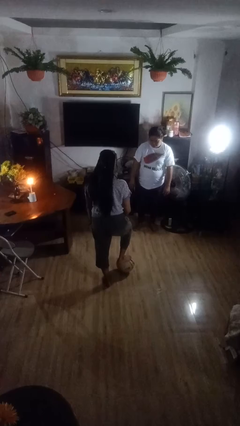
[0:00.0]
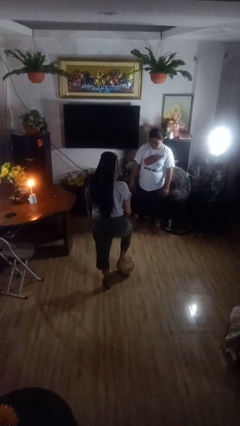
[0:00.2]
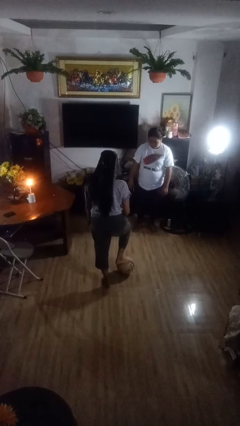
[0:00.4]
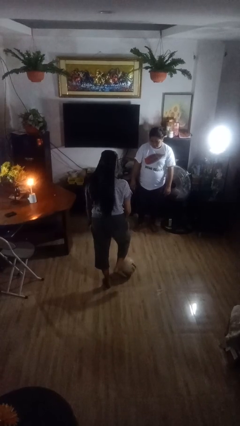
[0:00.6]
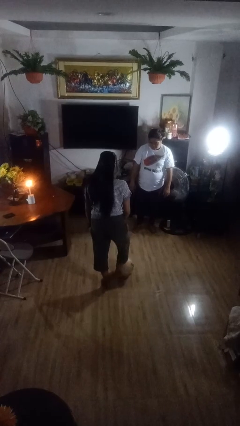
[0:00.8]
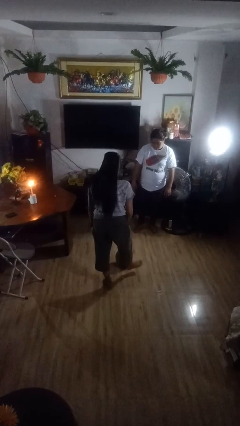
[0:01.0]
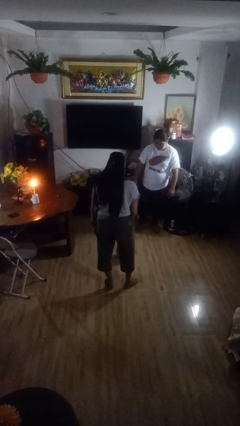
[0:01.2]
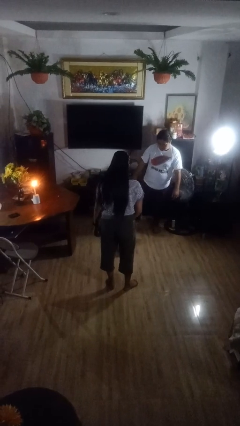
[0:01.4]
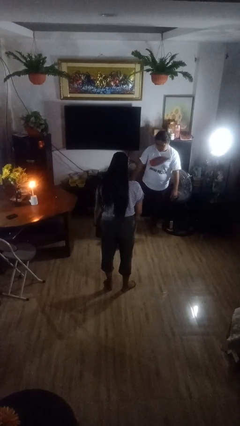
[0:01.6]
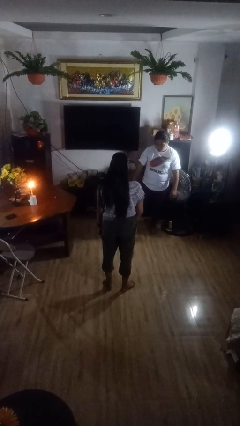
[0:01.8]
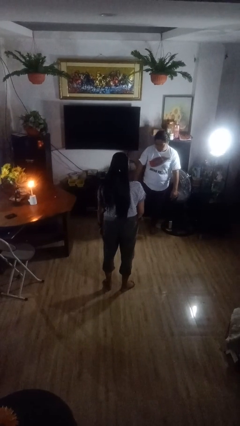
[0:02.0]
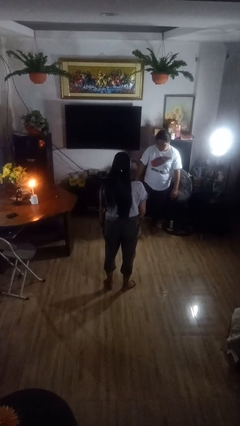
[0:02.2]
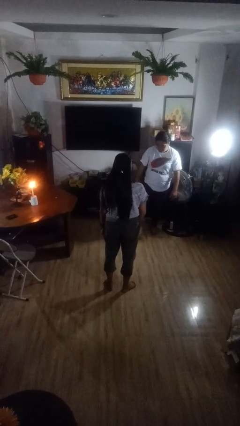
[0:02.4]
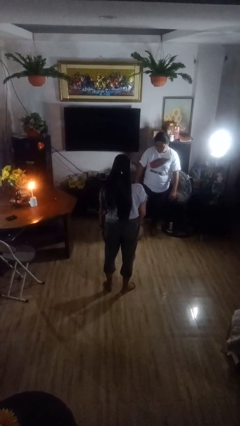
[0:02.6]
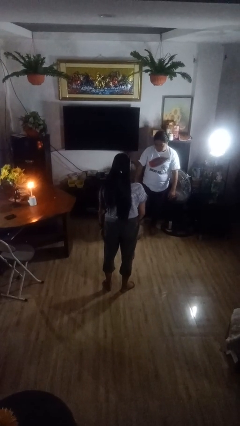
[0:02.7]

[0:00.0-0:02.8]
person kicks object to person

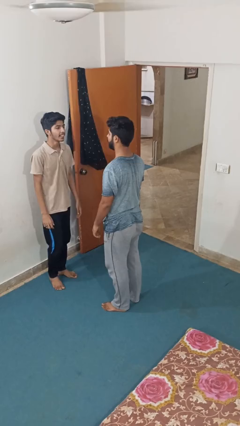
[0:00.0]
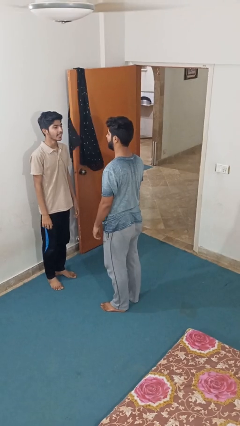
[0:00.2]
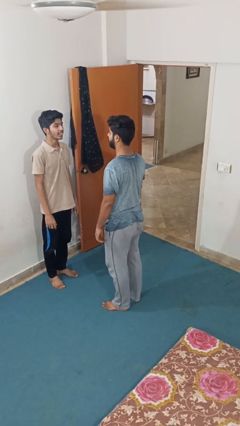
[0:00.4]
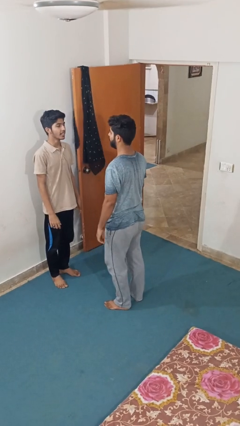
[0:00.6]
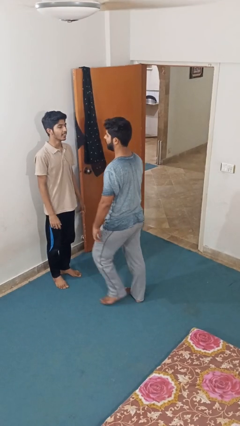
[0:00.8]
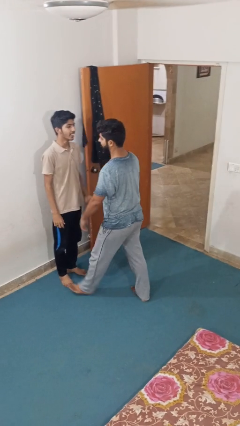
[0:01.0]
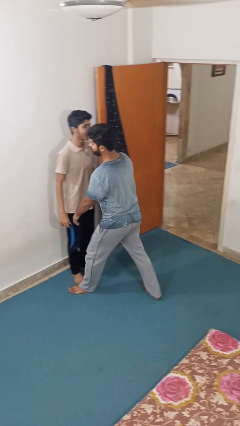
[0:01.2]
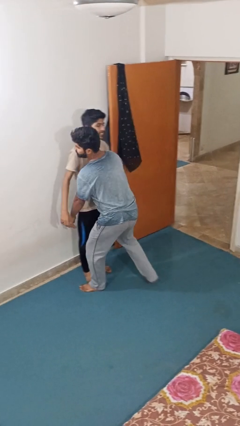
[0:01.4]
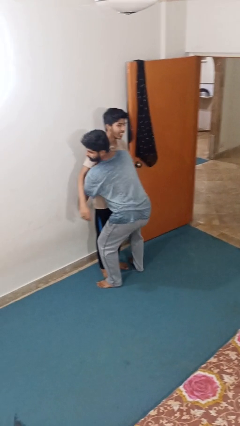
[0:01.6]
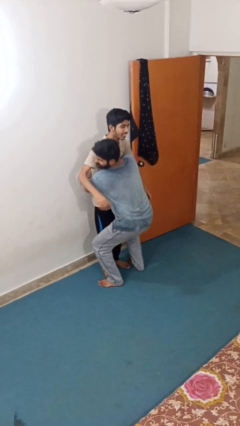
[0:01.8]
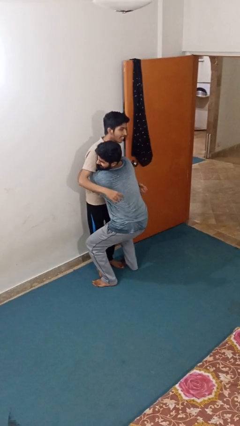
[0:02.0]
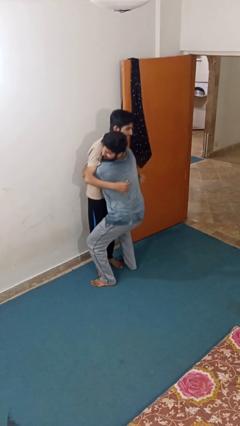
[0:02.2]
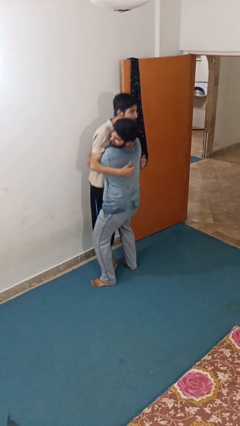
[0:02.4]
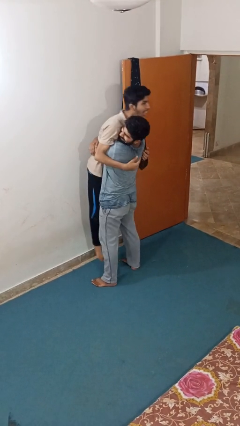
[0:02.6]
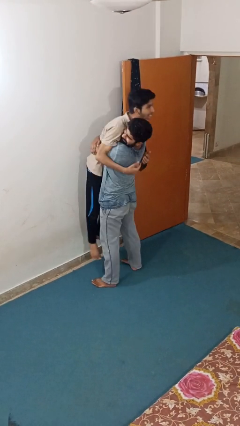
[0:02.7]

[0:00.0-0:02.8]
person picks up person

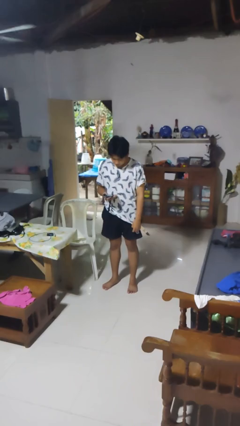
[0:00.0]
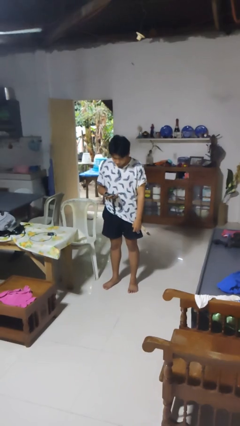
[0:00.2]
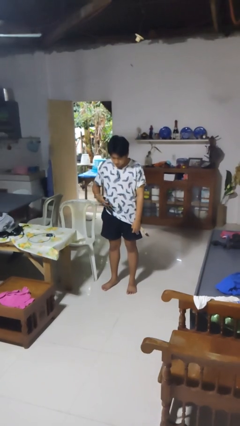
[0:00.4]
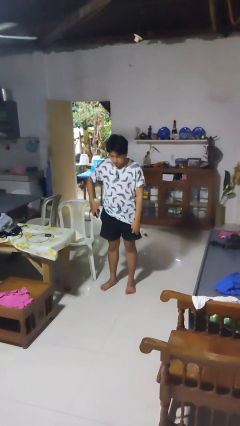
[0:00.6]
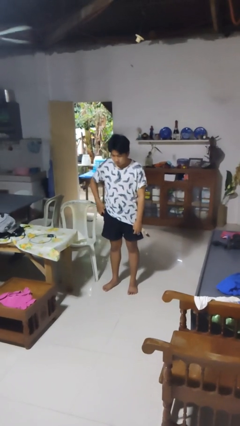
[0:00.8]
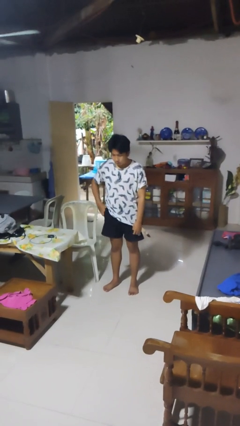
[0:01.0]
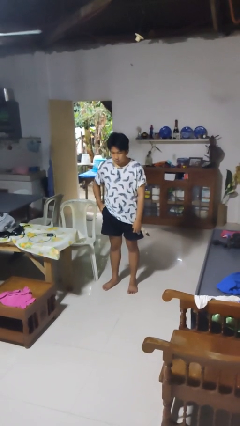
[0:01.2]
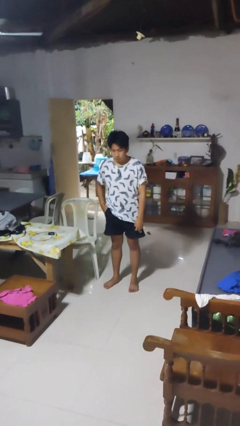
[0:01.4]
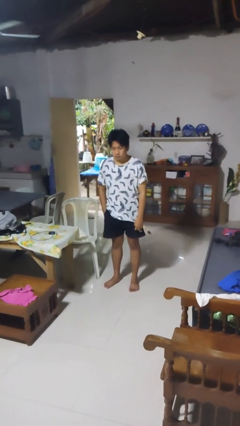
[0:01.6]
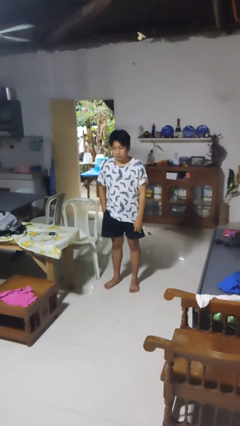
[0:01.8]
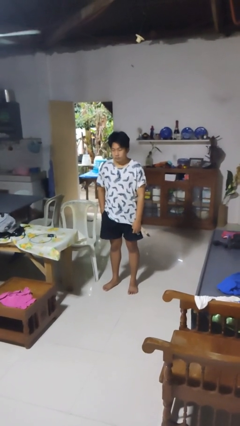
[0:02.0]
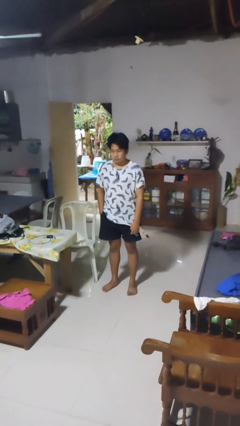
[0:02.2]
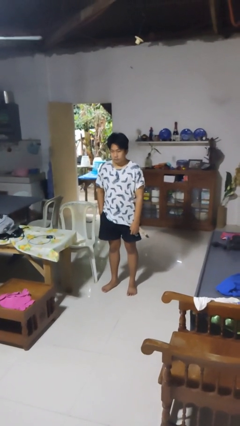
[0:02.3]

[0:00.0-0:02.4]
person puts phone into pocket

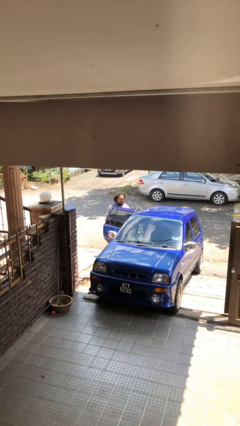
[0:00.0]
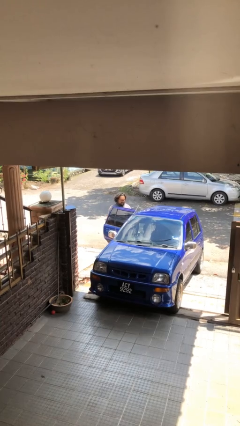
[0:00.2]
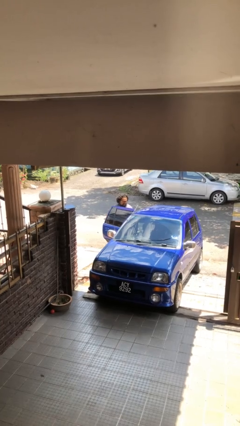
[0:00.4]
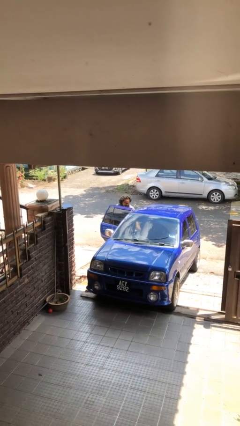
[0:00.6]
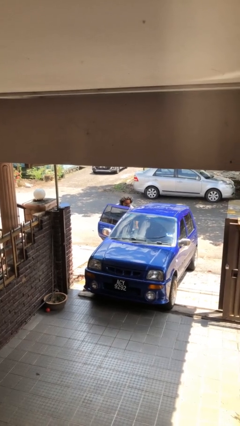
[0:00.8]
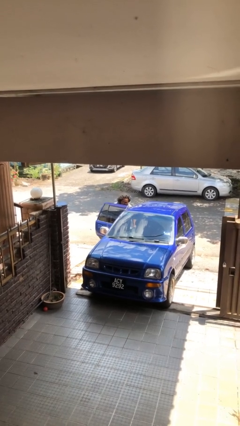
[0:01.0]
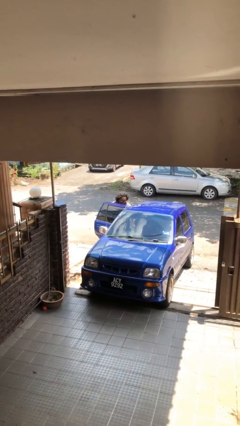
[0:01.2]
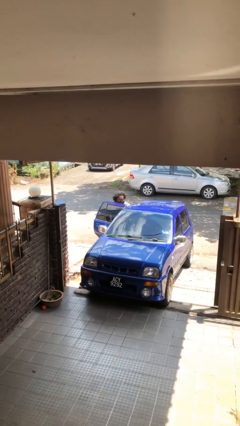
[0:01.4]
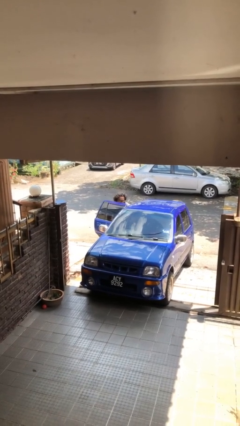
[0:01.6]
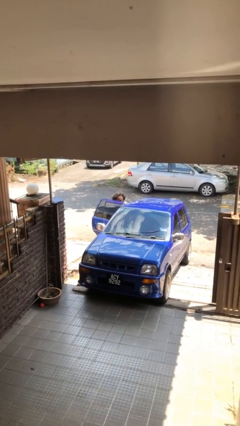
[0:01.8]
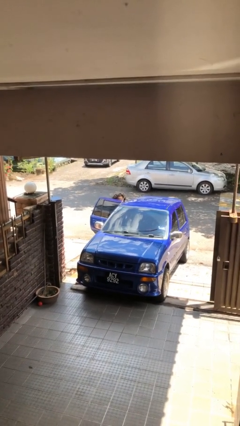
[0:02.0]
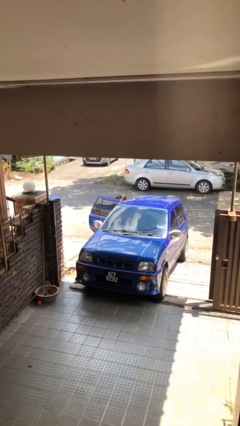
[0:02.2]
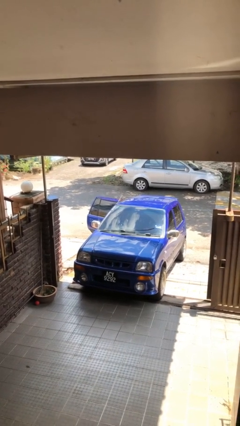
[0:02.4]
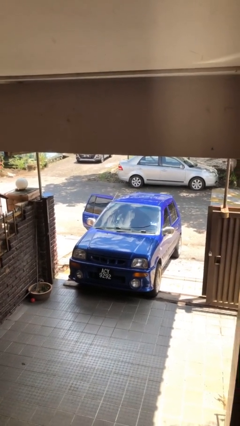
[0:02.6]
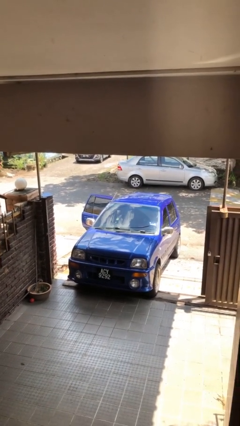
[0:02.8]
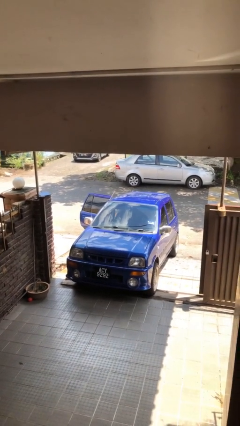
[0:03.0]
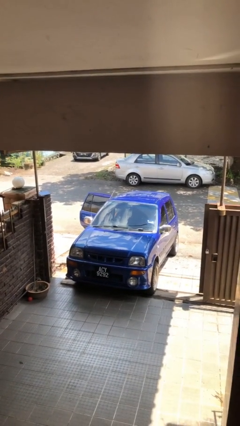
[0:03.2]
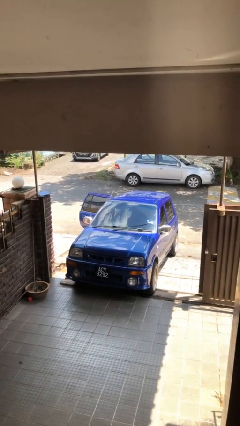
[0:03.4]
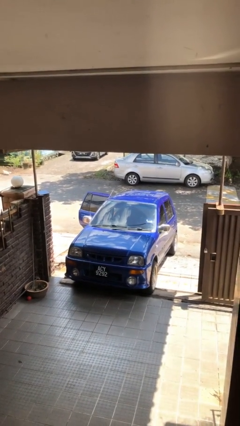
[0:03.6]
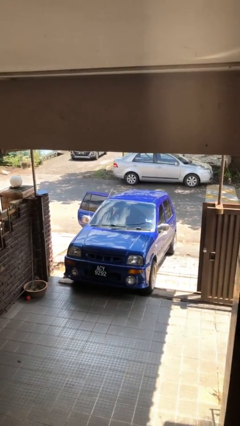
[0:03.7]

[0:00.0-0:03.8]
person enters car

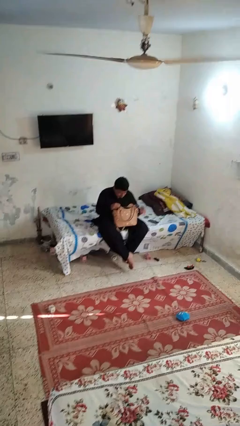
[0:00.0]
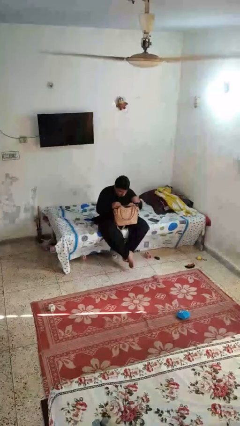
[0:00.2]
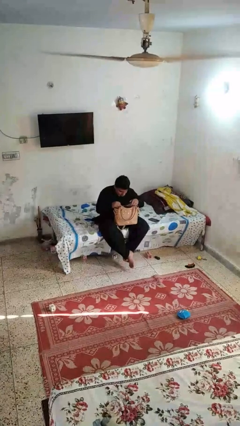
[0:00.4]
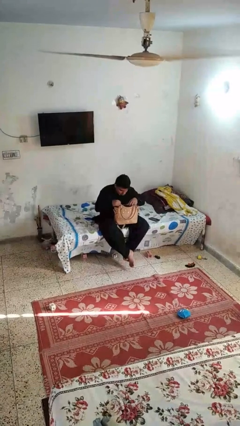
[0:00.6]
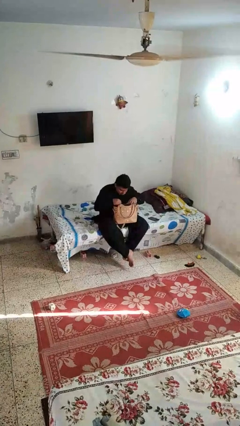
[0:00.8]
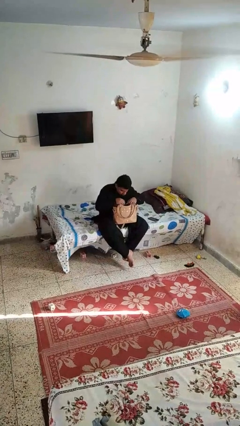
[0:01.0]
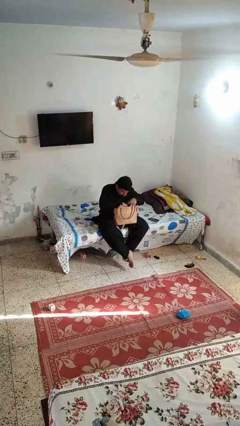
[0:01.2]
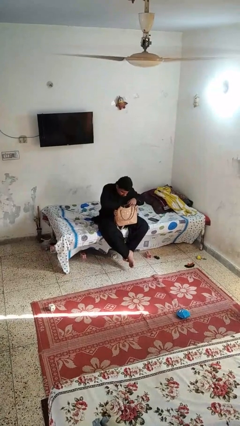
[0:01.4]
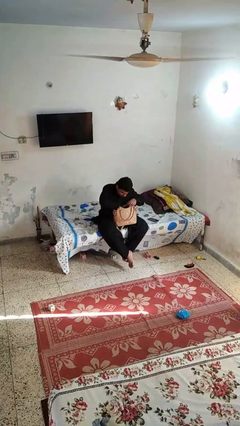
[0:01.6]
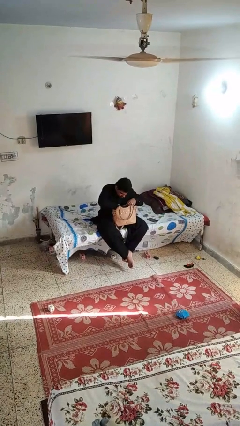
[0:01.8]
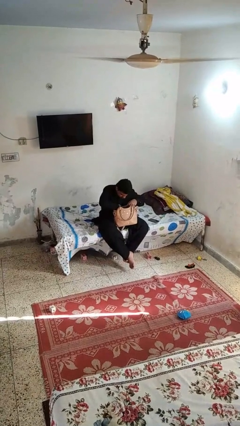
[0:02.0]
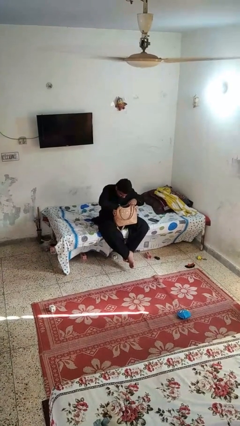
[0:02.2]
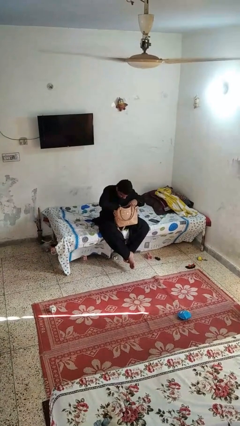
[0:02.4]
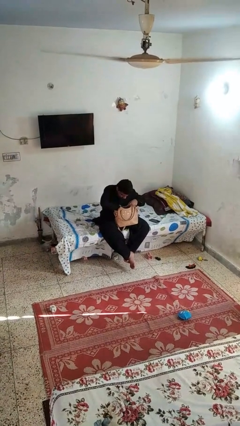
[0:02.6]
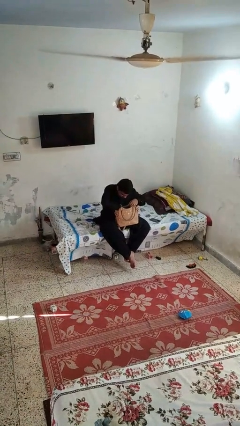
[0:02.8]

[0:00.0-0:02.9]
person searches in purse

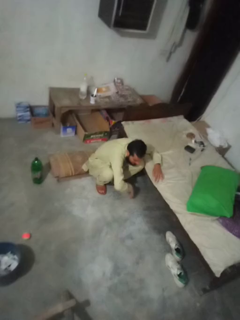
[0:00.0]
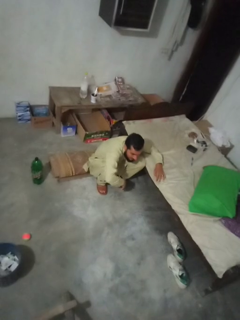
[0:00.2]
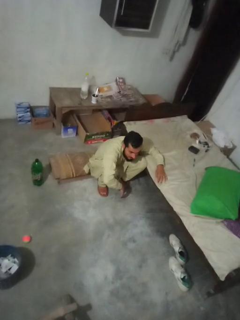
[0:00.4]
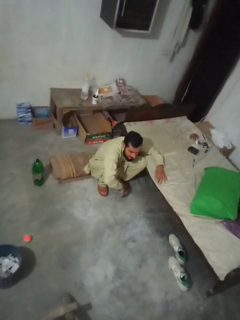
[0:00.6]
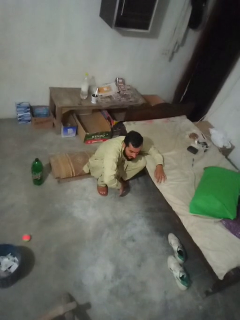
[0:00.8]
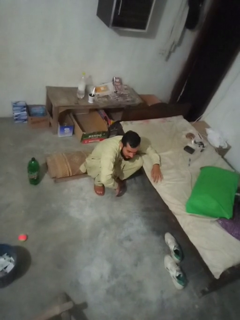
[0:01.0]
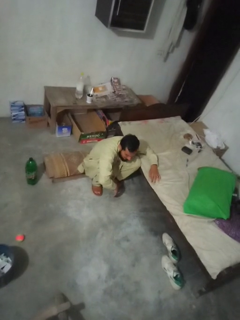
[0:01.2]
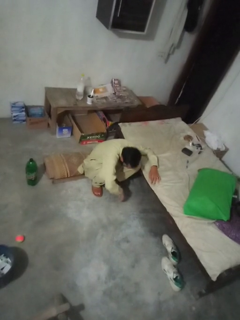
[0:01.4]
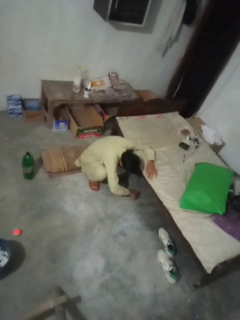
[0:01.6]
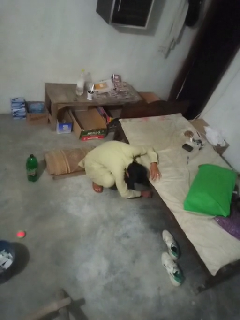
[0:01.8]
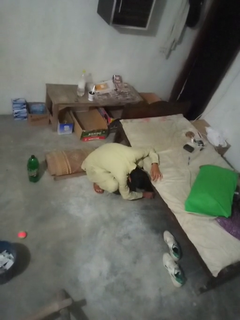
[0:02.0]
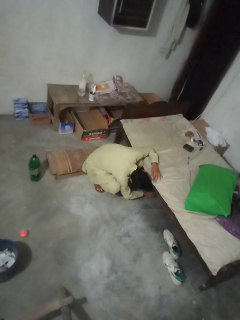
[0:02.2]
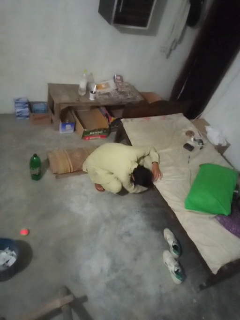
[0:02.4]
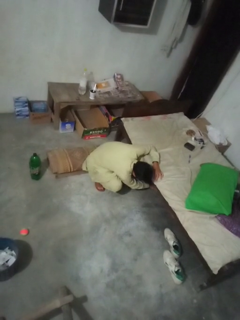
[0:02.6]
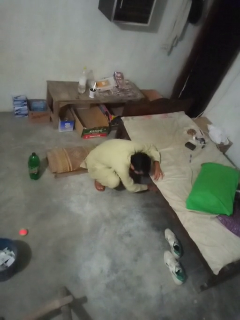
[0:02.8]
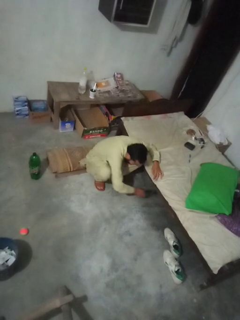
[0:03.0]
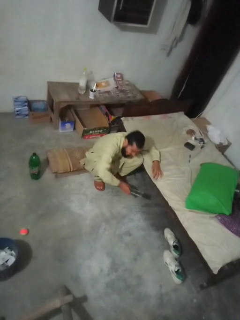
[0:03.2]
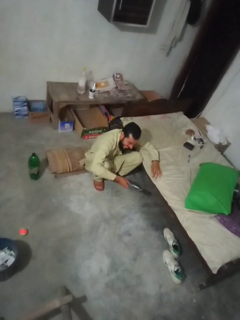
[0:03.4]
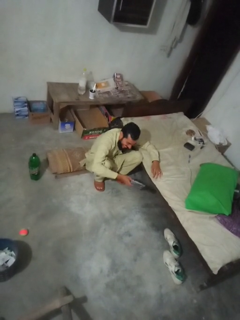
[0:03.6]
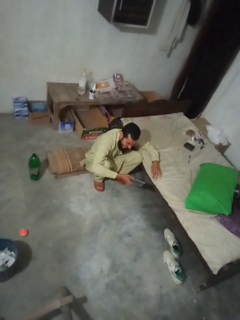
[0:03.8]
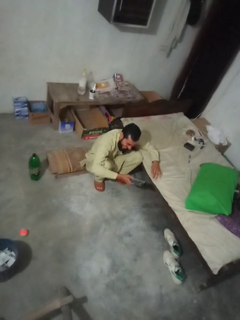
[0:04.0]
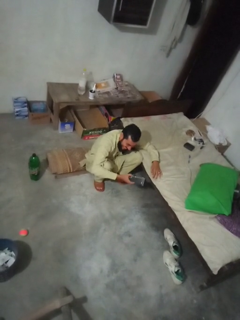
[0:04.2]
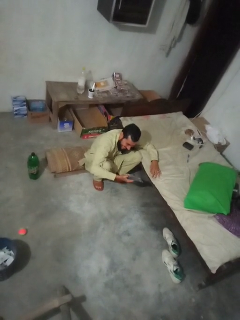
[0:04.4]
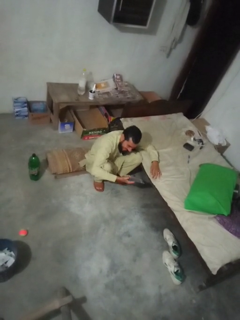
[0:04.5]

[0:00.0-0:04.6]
person searches under couch
